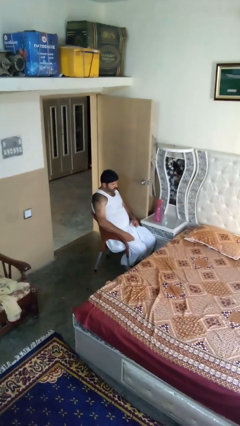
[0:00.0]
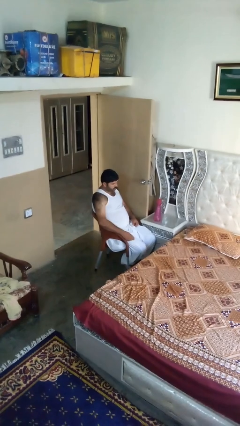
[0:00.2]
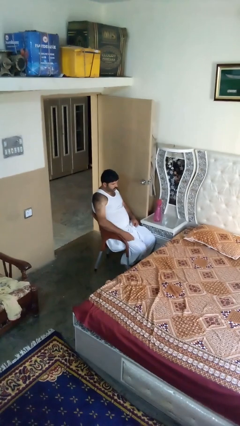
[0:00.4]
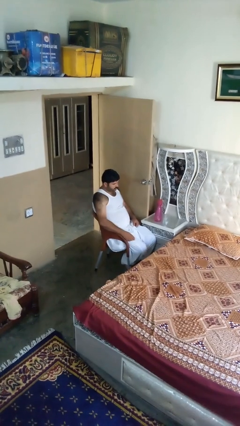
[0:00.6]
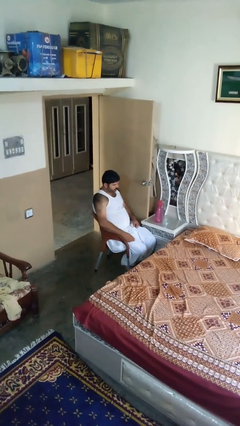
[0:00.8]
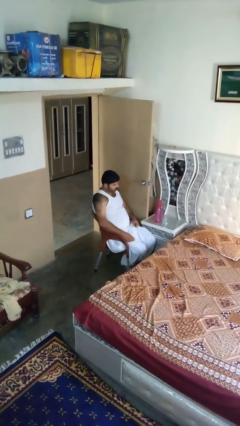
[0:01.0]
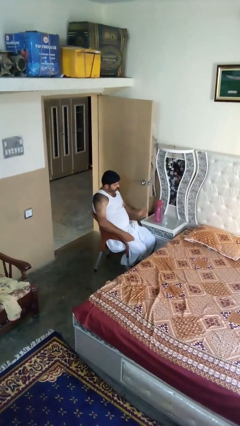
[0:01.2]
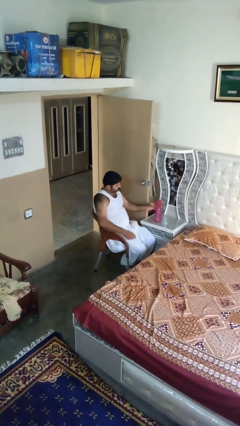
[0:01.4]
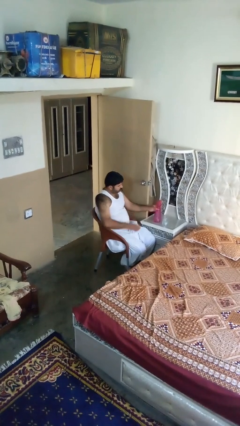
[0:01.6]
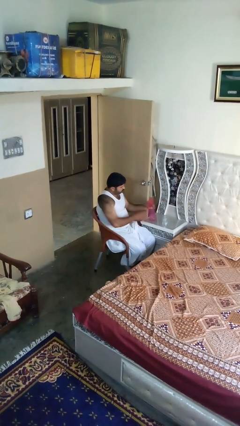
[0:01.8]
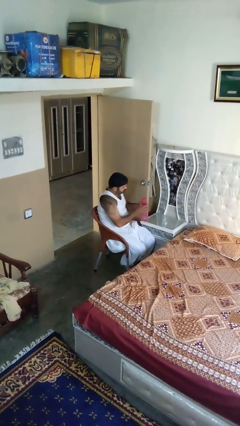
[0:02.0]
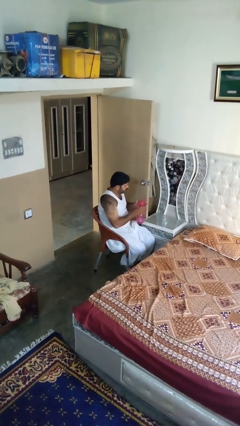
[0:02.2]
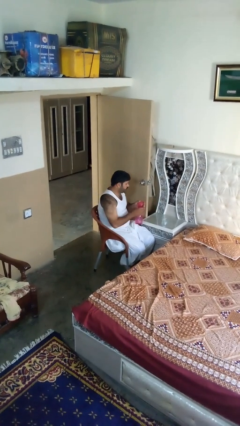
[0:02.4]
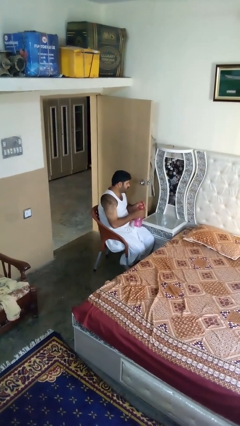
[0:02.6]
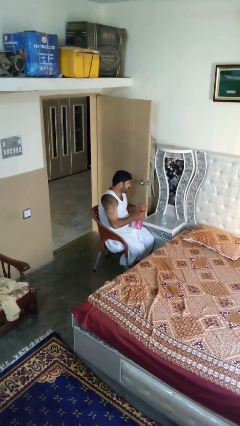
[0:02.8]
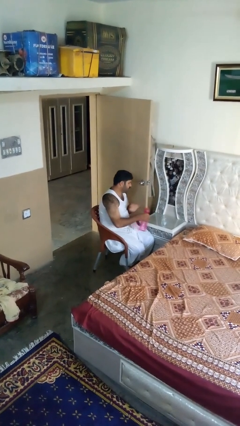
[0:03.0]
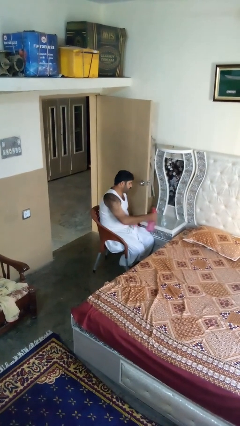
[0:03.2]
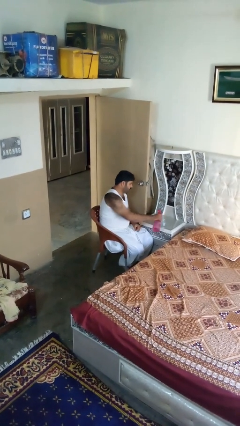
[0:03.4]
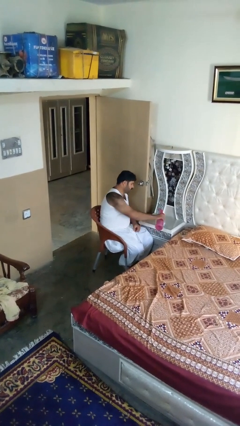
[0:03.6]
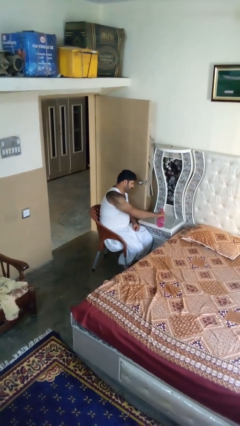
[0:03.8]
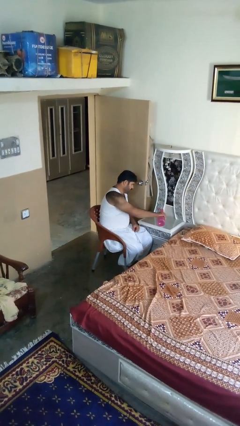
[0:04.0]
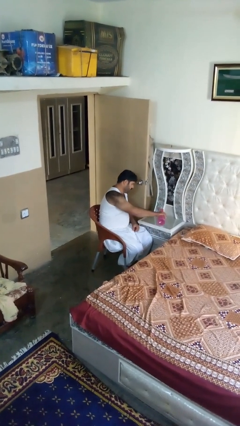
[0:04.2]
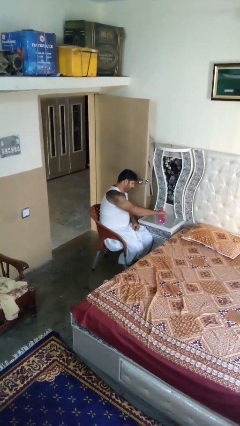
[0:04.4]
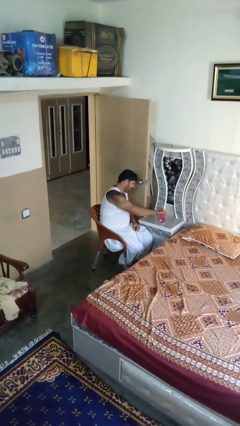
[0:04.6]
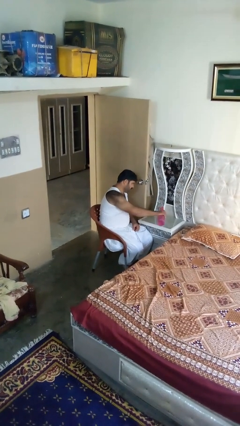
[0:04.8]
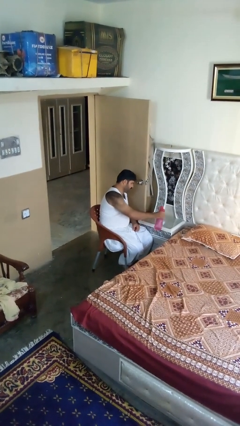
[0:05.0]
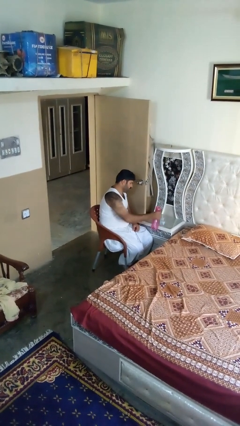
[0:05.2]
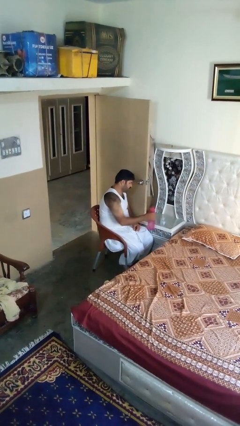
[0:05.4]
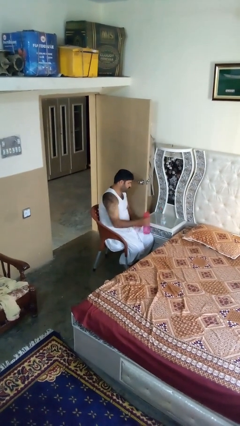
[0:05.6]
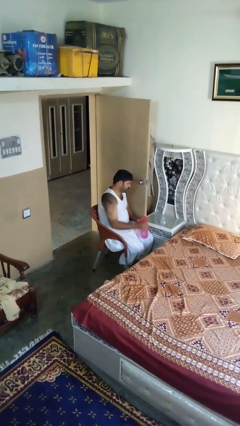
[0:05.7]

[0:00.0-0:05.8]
person pours liquid into cup

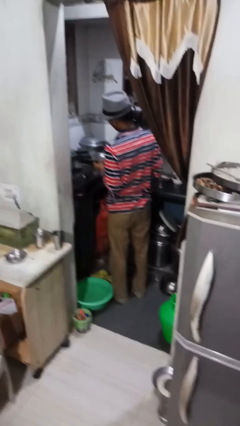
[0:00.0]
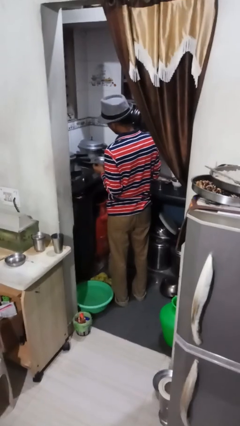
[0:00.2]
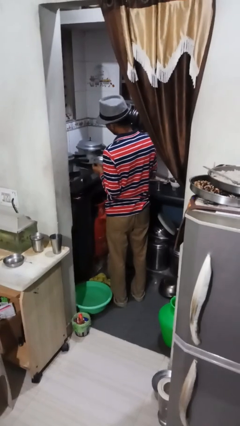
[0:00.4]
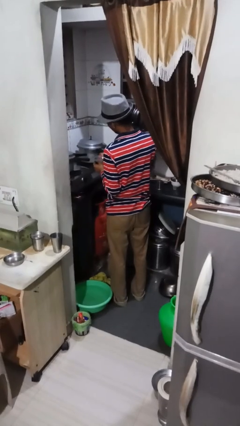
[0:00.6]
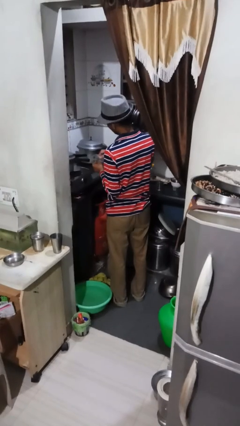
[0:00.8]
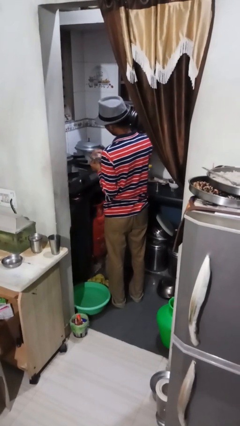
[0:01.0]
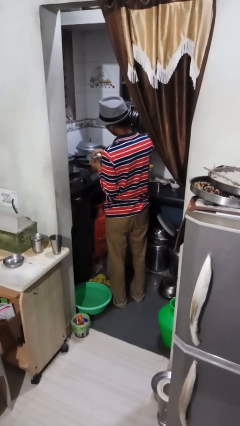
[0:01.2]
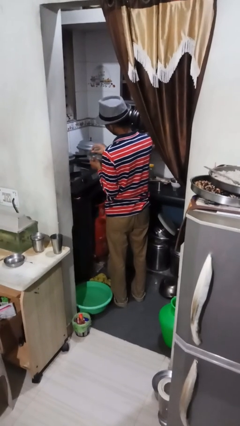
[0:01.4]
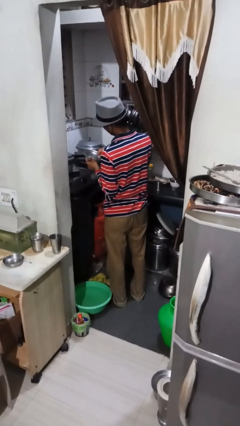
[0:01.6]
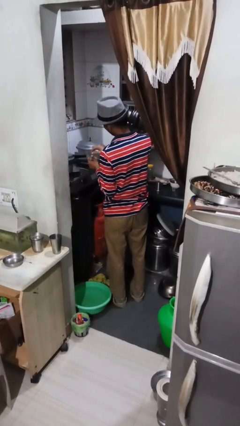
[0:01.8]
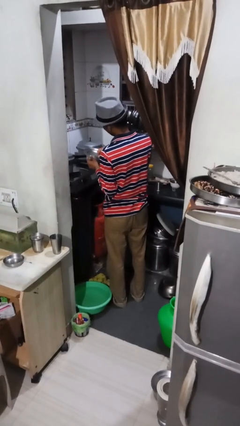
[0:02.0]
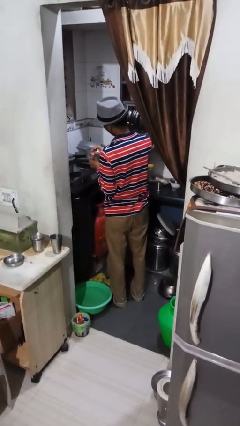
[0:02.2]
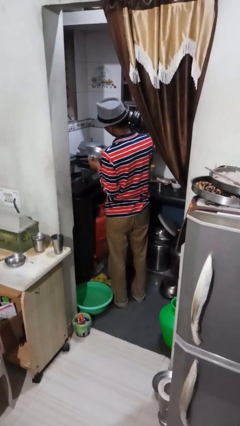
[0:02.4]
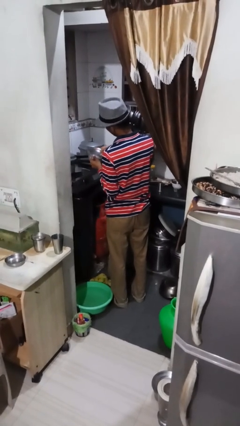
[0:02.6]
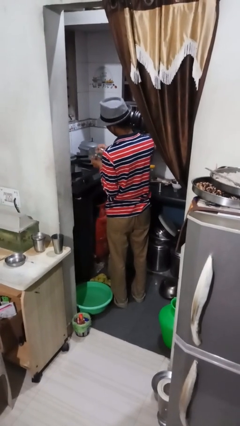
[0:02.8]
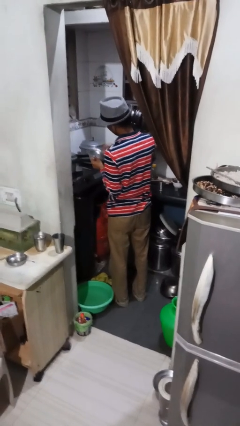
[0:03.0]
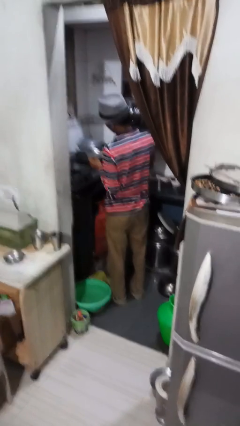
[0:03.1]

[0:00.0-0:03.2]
person washes dish

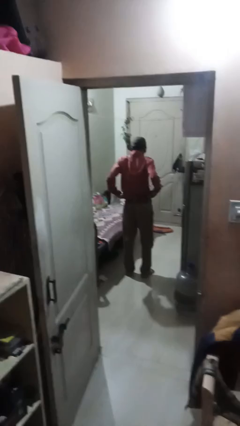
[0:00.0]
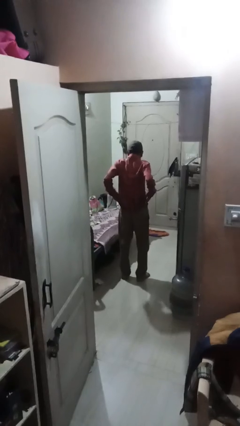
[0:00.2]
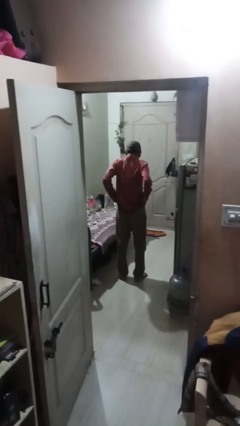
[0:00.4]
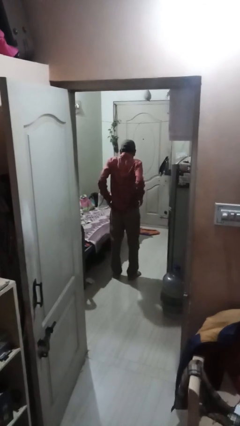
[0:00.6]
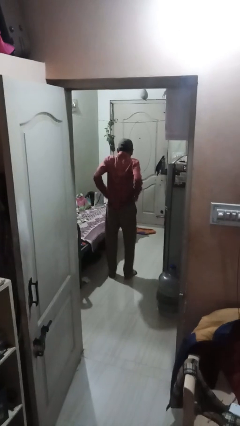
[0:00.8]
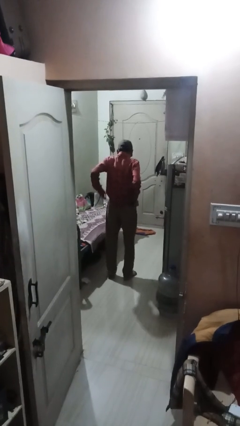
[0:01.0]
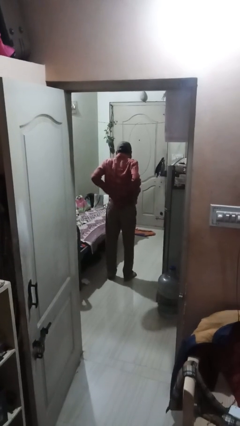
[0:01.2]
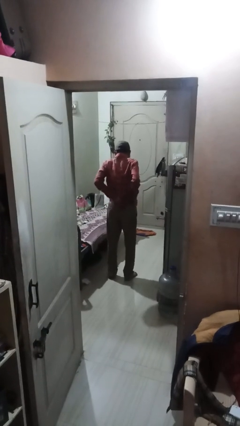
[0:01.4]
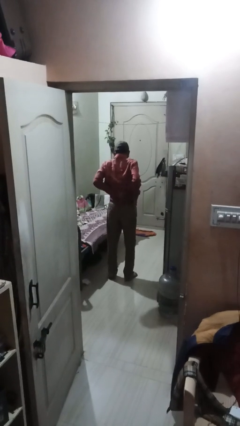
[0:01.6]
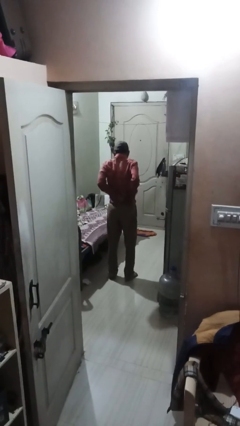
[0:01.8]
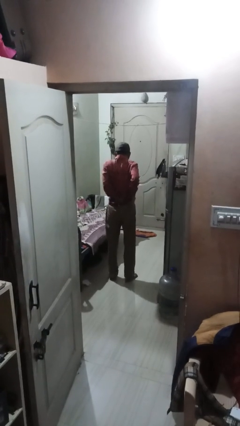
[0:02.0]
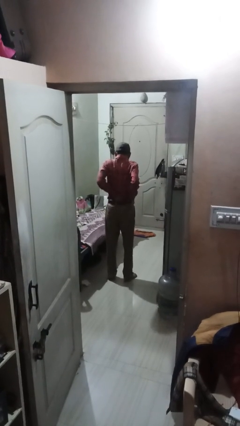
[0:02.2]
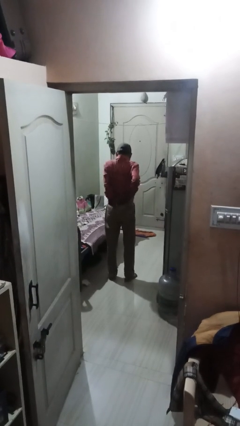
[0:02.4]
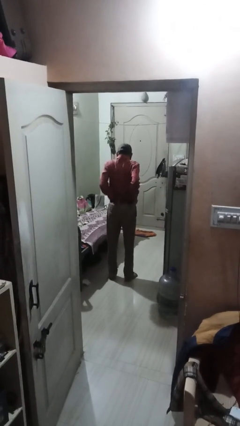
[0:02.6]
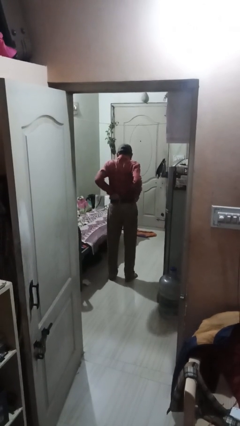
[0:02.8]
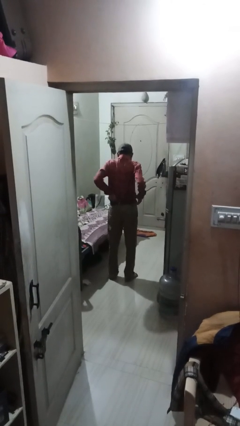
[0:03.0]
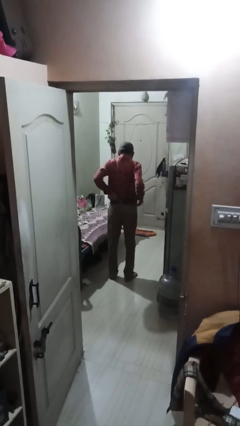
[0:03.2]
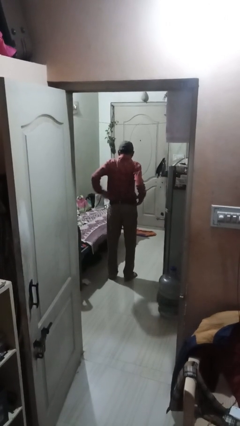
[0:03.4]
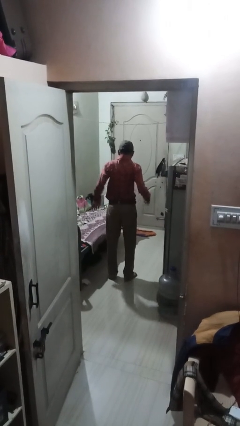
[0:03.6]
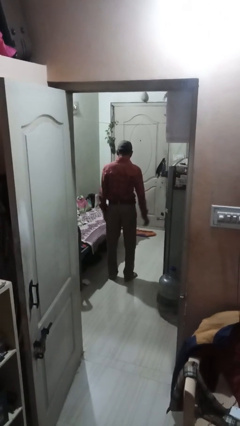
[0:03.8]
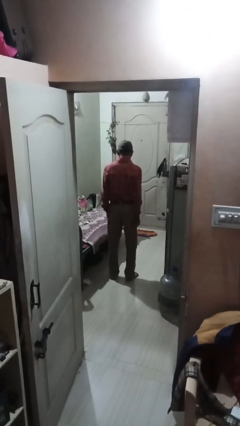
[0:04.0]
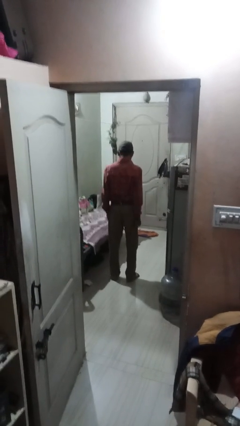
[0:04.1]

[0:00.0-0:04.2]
person tucks in shirt

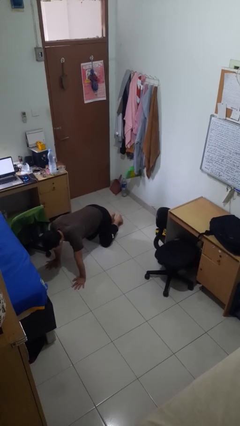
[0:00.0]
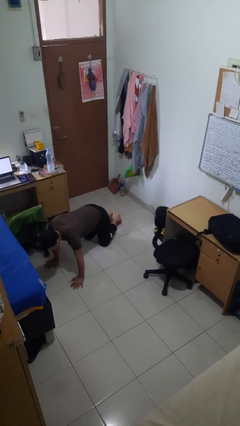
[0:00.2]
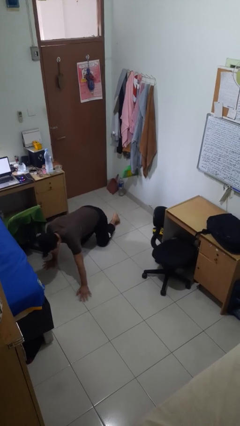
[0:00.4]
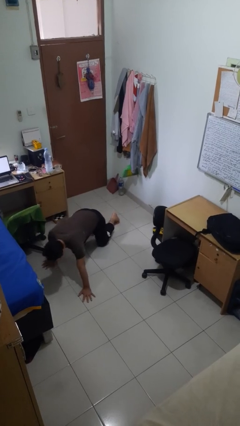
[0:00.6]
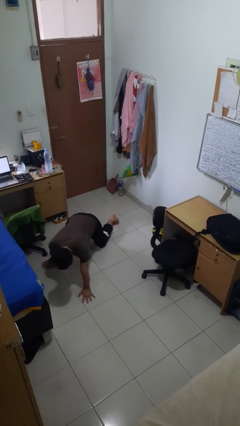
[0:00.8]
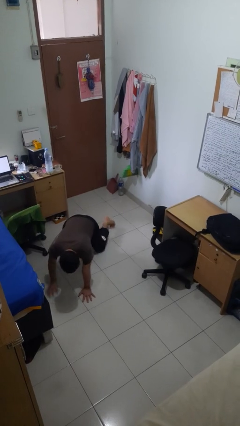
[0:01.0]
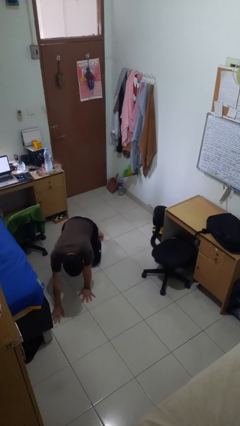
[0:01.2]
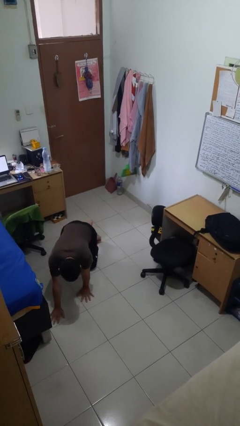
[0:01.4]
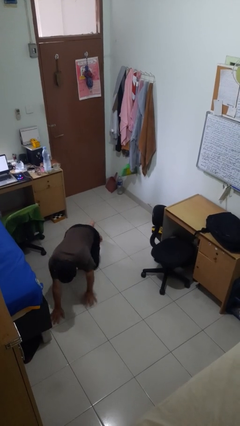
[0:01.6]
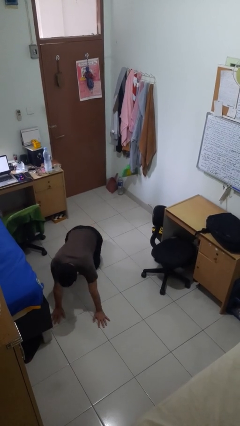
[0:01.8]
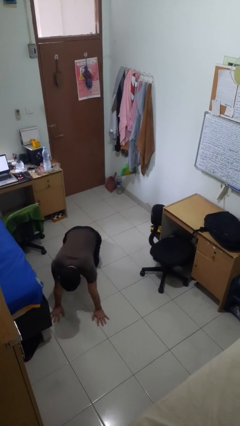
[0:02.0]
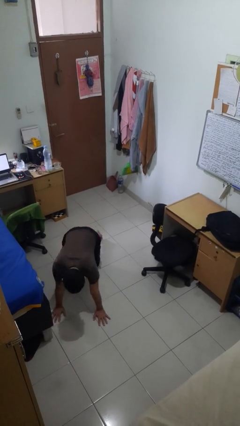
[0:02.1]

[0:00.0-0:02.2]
person crawls

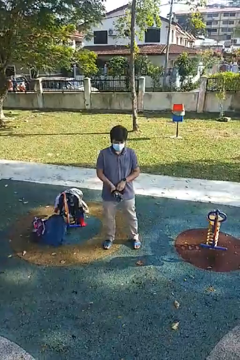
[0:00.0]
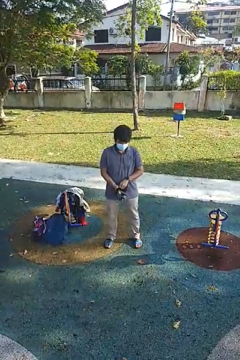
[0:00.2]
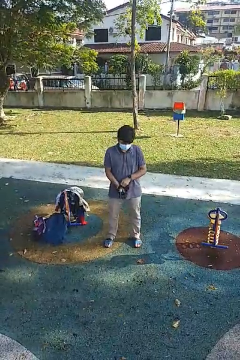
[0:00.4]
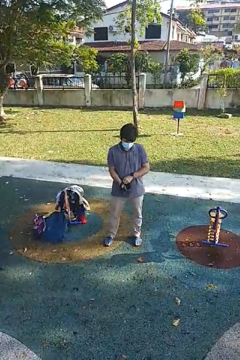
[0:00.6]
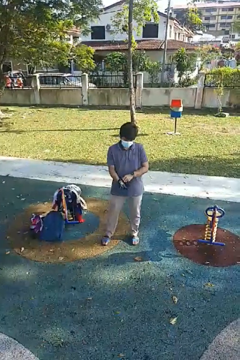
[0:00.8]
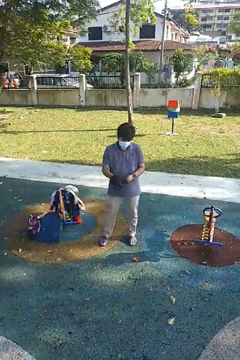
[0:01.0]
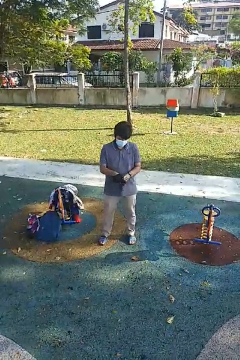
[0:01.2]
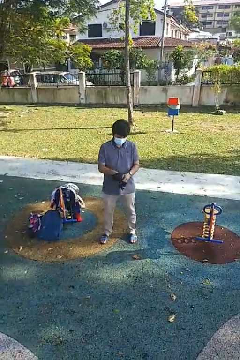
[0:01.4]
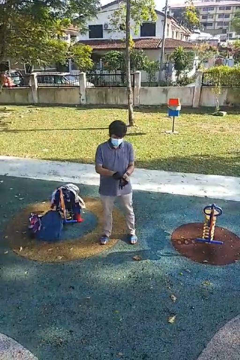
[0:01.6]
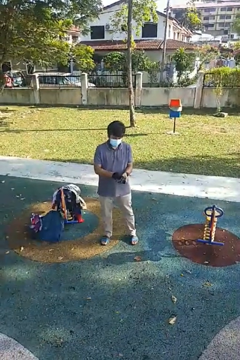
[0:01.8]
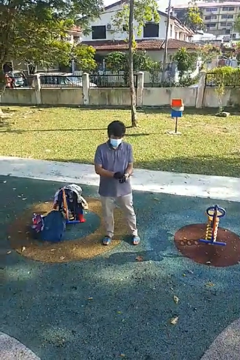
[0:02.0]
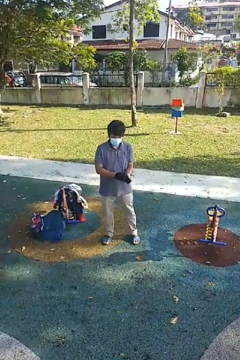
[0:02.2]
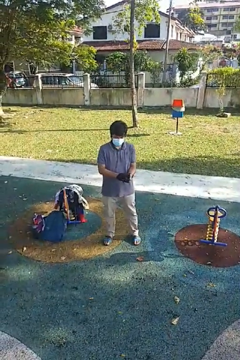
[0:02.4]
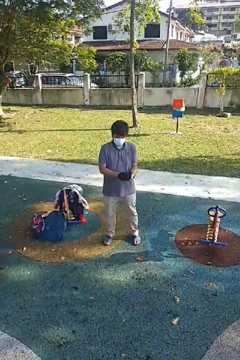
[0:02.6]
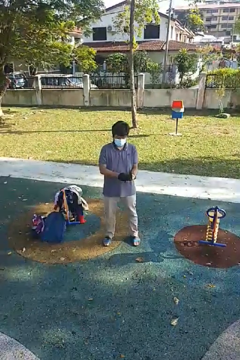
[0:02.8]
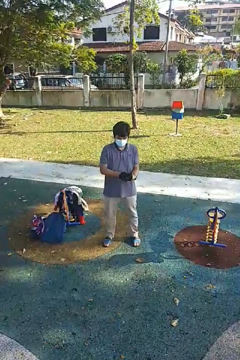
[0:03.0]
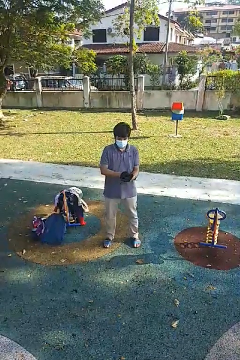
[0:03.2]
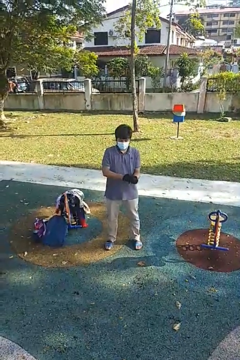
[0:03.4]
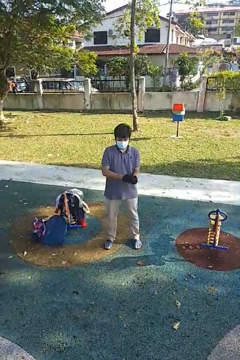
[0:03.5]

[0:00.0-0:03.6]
person puts on gloves
